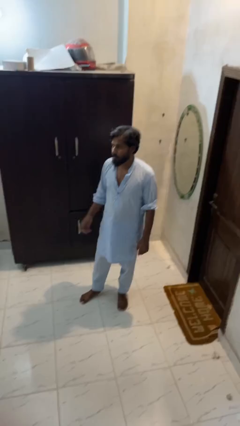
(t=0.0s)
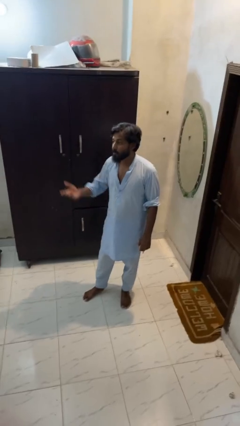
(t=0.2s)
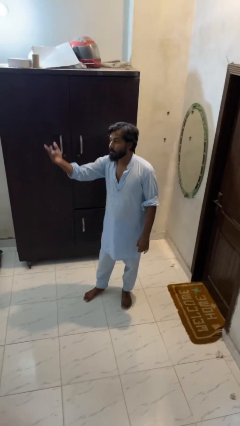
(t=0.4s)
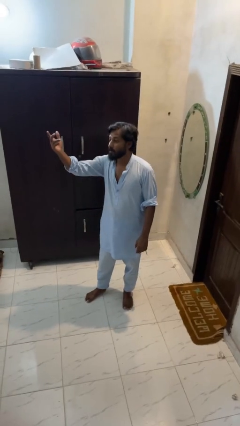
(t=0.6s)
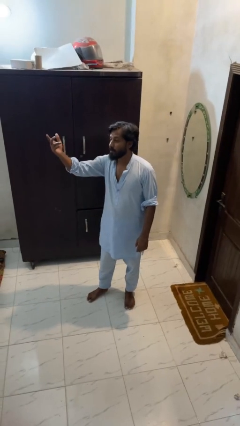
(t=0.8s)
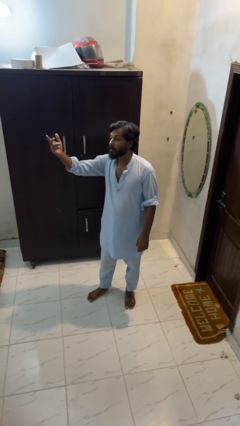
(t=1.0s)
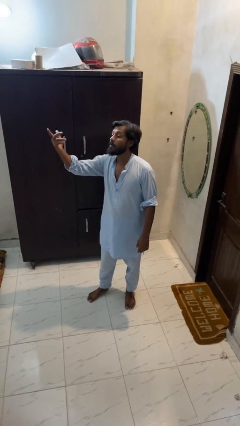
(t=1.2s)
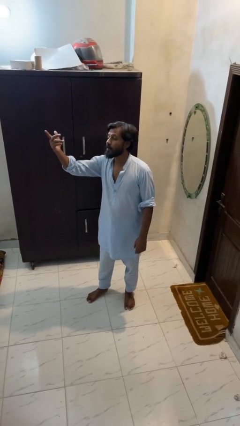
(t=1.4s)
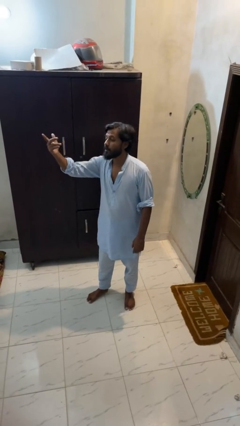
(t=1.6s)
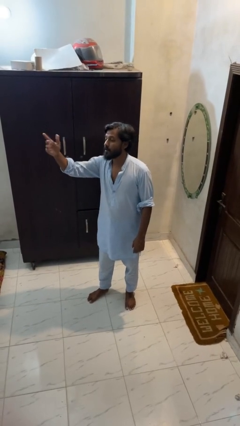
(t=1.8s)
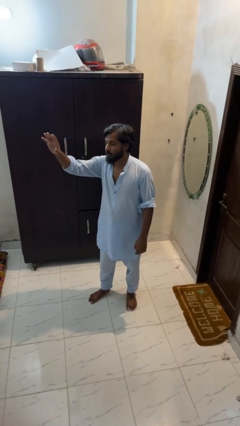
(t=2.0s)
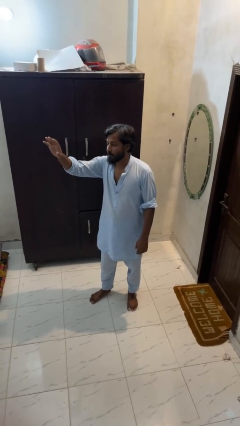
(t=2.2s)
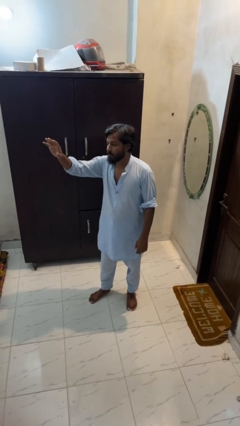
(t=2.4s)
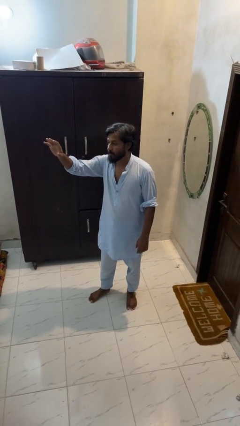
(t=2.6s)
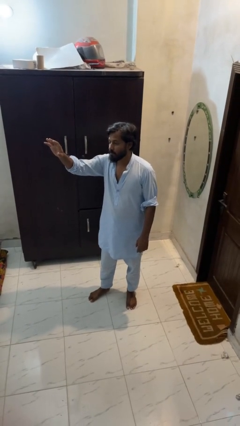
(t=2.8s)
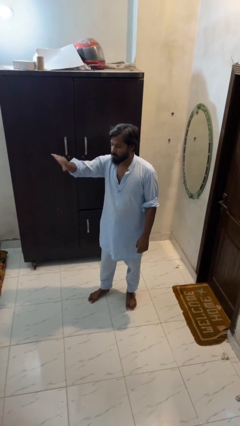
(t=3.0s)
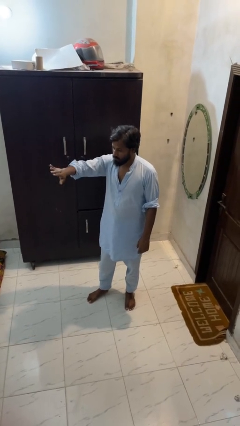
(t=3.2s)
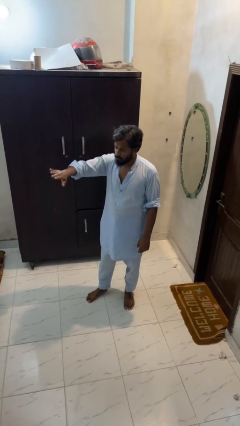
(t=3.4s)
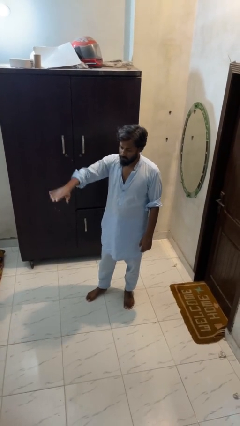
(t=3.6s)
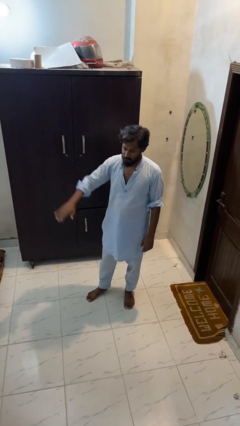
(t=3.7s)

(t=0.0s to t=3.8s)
person gestures raise hand

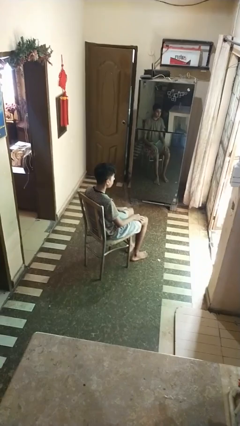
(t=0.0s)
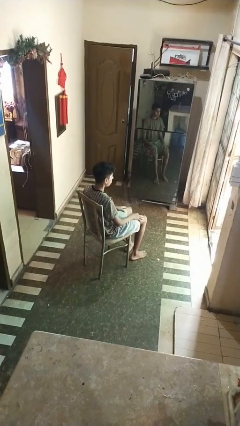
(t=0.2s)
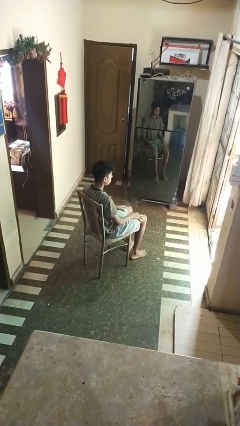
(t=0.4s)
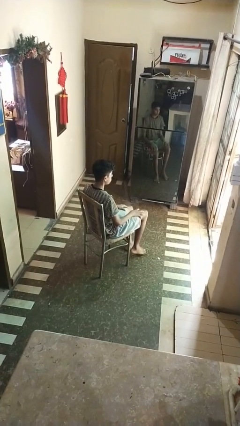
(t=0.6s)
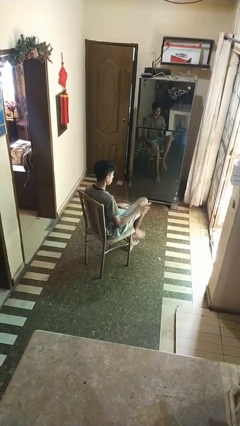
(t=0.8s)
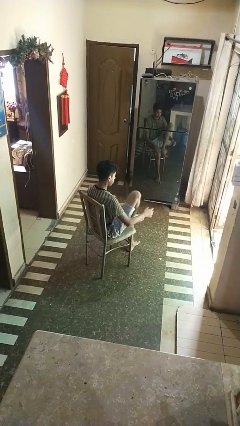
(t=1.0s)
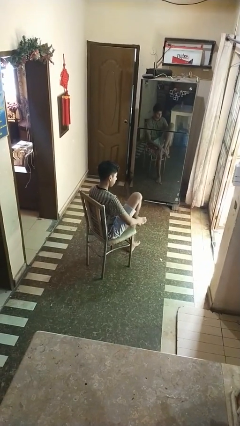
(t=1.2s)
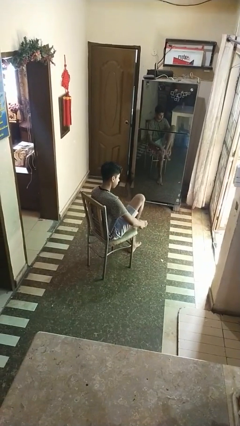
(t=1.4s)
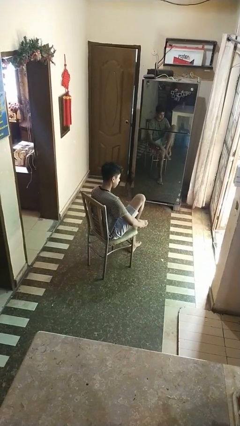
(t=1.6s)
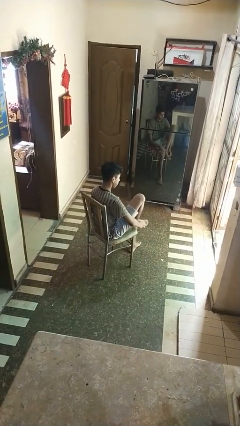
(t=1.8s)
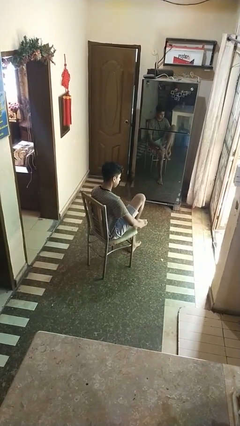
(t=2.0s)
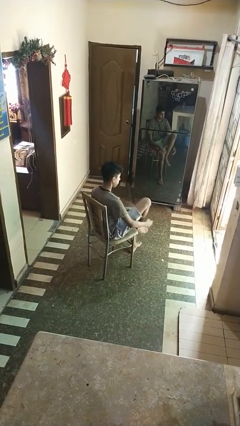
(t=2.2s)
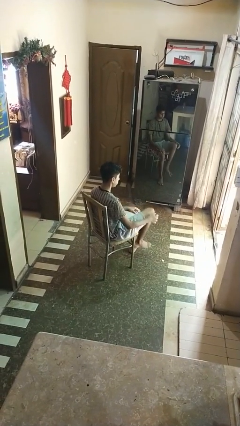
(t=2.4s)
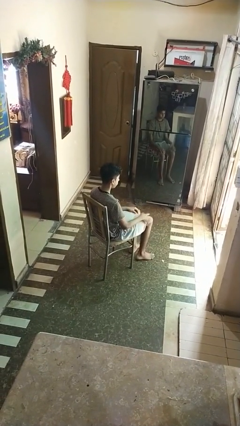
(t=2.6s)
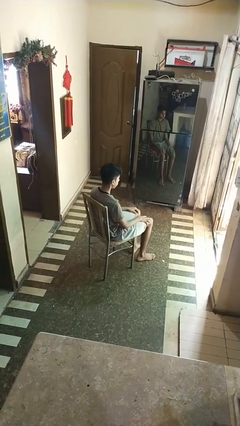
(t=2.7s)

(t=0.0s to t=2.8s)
person rubs foot

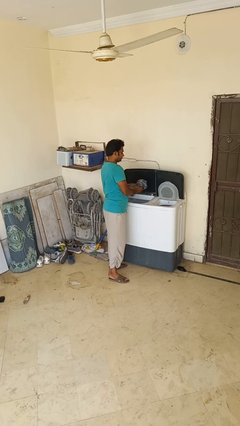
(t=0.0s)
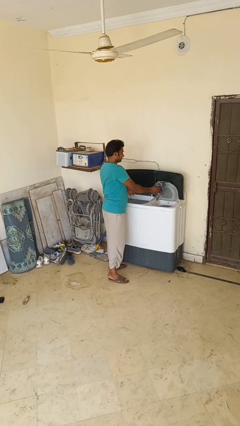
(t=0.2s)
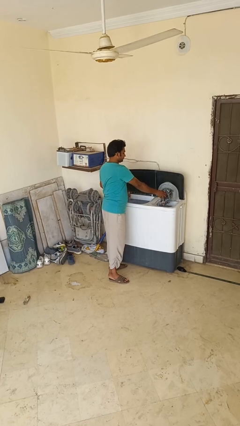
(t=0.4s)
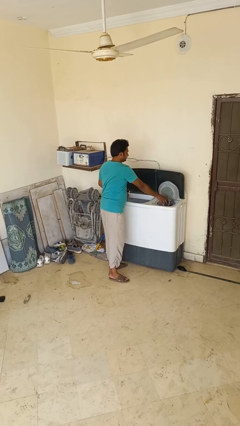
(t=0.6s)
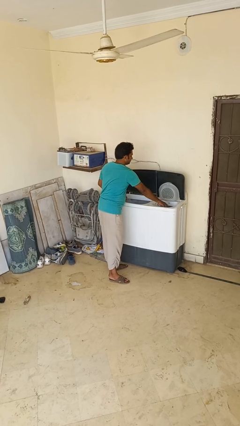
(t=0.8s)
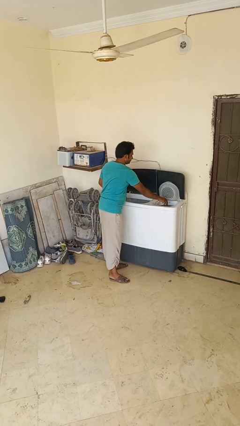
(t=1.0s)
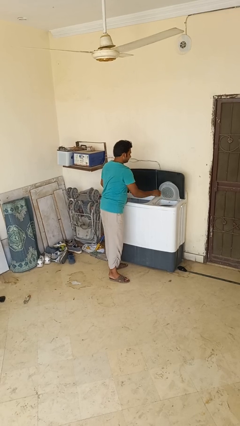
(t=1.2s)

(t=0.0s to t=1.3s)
person loads dryer

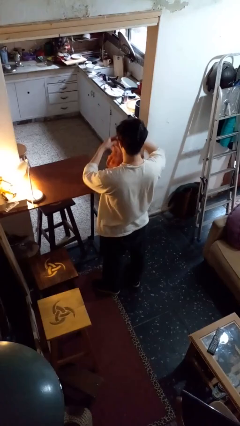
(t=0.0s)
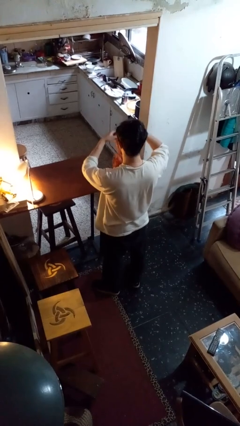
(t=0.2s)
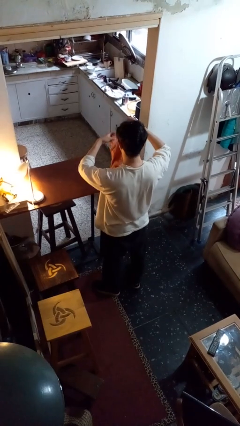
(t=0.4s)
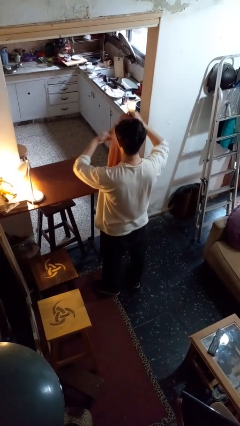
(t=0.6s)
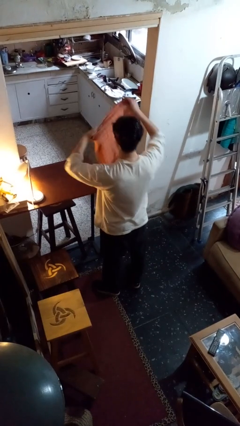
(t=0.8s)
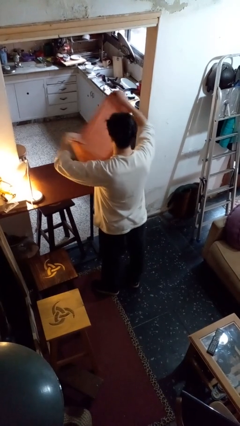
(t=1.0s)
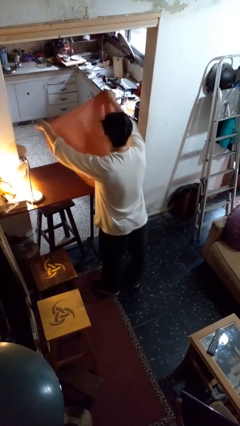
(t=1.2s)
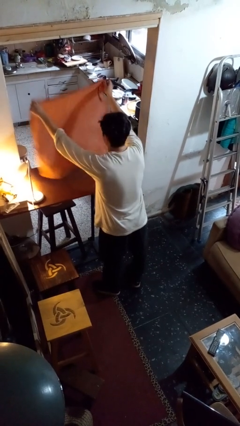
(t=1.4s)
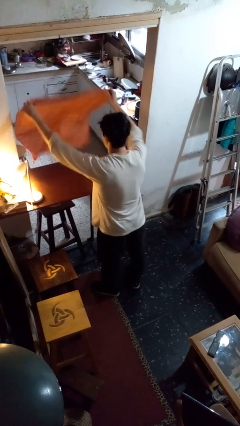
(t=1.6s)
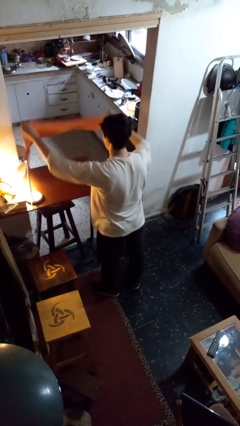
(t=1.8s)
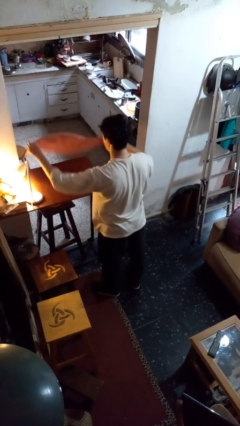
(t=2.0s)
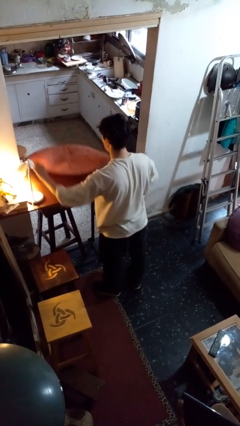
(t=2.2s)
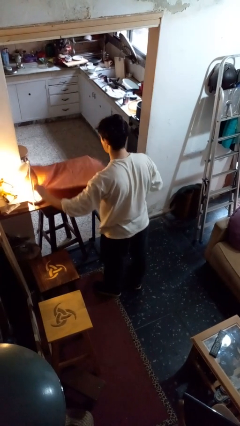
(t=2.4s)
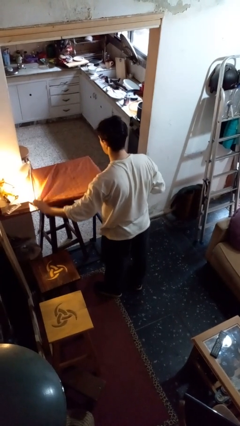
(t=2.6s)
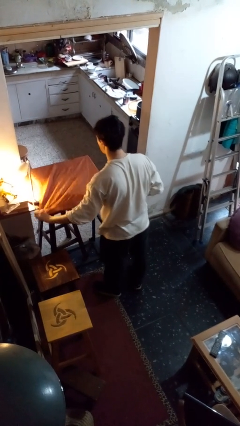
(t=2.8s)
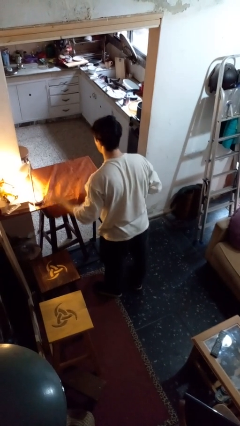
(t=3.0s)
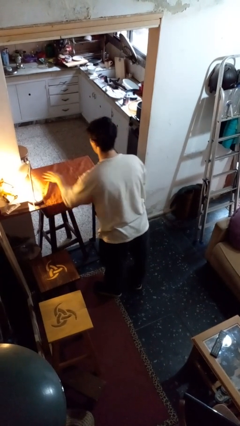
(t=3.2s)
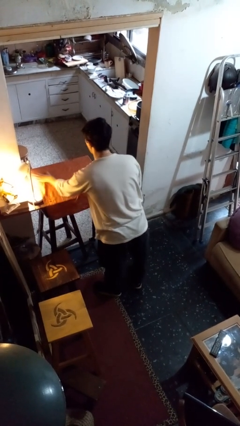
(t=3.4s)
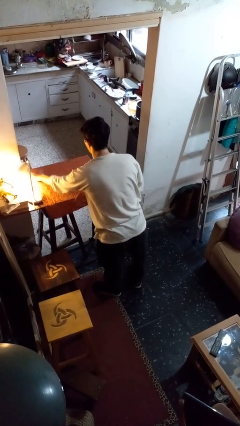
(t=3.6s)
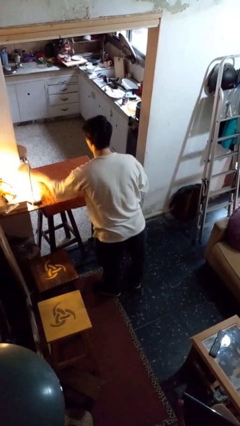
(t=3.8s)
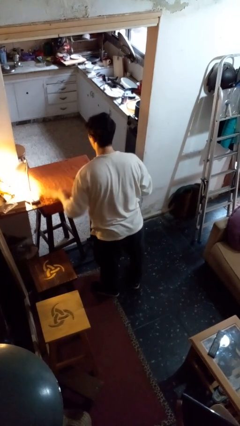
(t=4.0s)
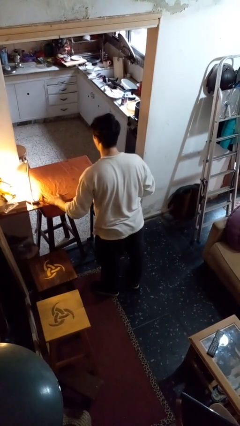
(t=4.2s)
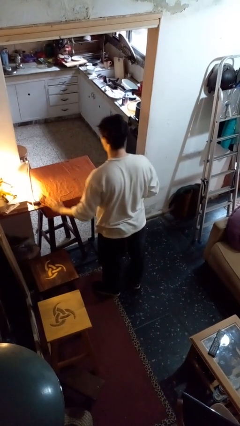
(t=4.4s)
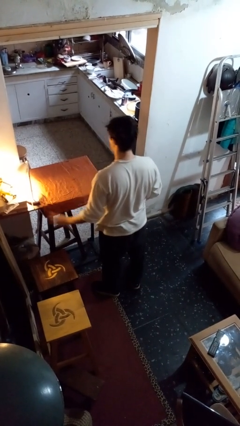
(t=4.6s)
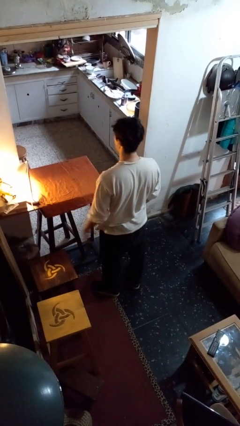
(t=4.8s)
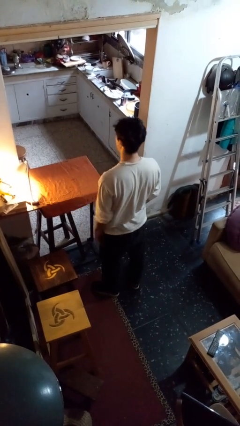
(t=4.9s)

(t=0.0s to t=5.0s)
person spreads tablecloth

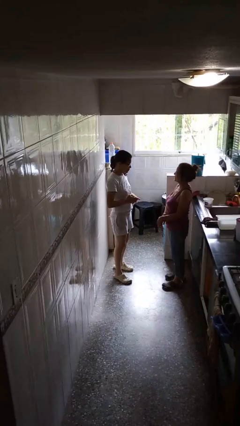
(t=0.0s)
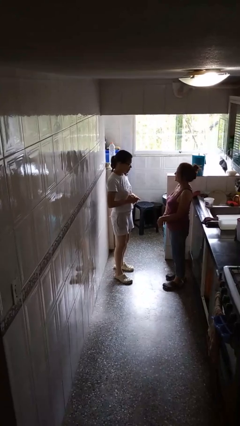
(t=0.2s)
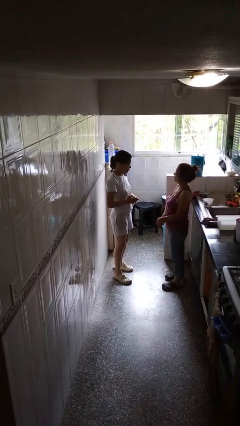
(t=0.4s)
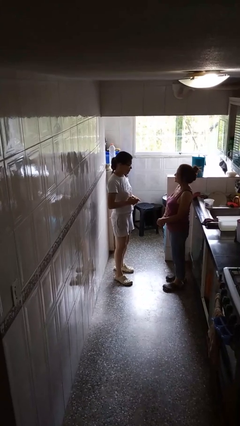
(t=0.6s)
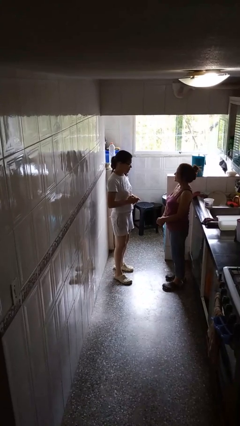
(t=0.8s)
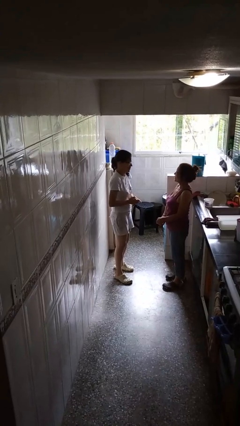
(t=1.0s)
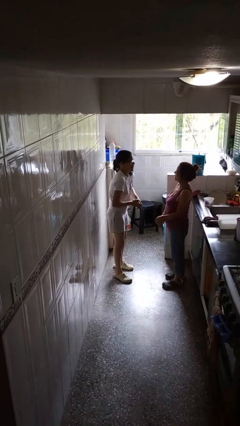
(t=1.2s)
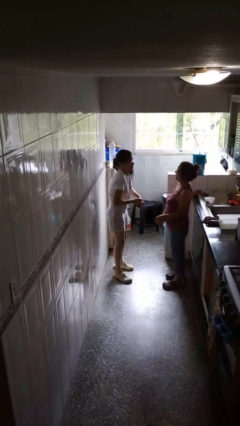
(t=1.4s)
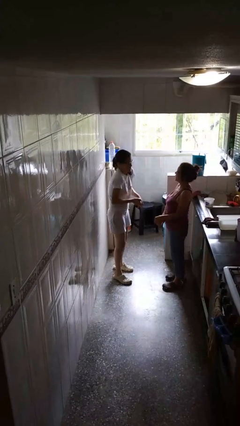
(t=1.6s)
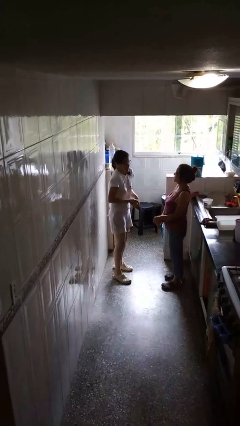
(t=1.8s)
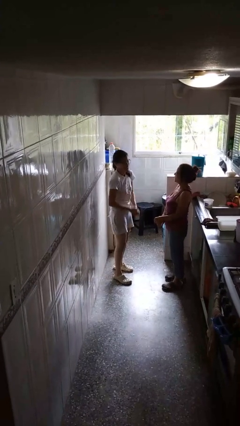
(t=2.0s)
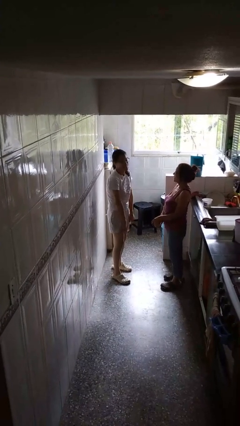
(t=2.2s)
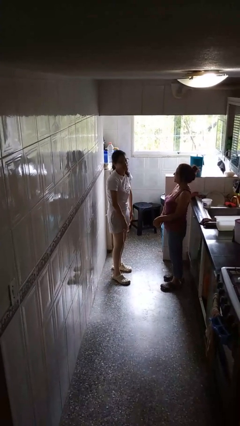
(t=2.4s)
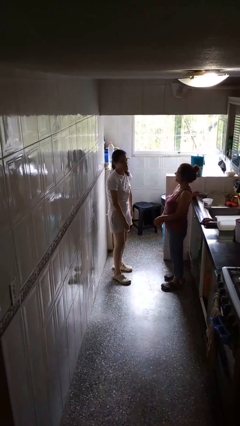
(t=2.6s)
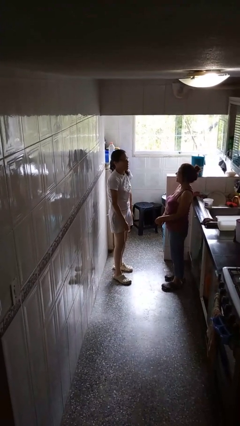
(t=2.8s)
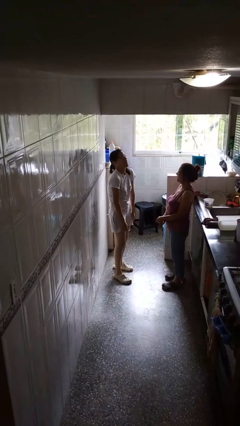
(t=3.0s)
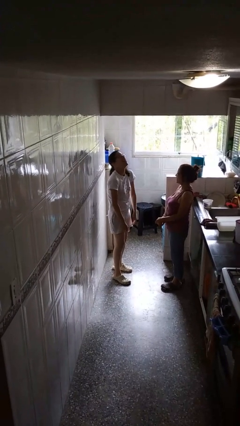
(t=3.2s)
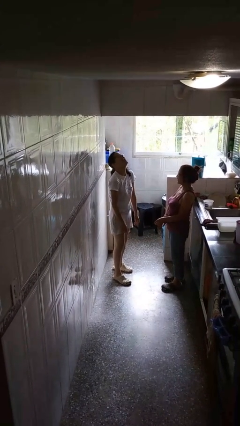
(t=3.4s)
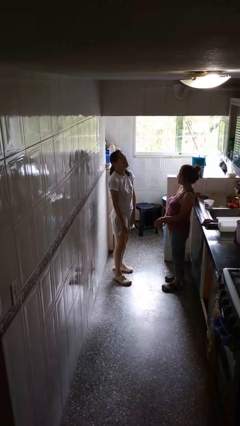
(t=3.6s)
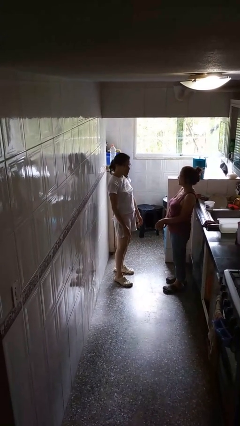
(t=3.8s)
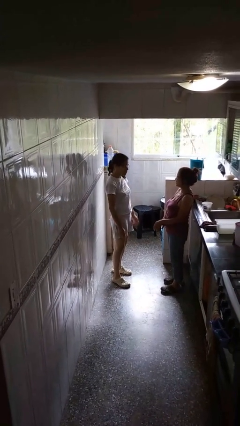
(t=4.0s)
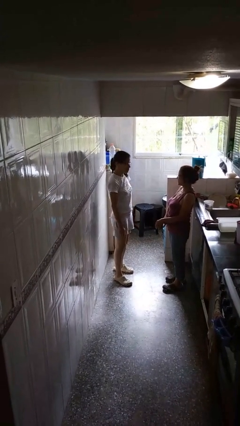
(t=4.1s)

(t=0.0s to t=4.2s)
person laughs with person

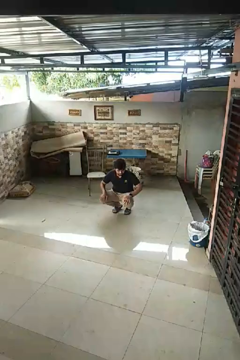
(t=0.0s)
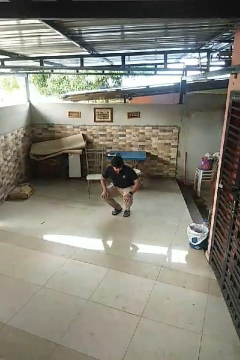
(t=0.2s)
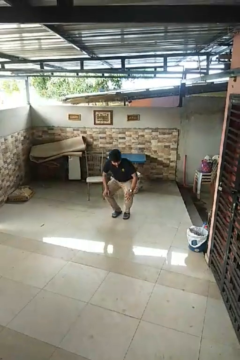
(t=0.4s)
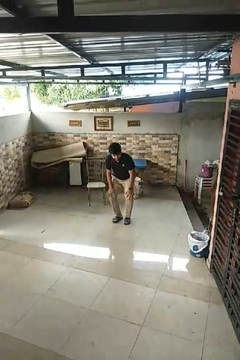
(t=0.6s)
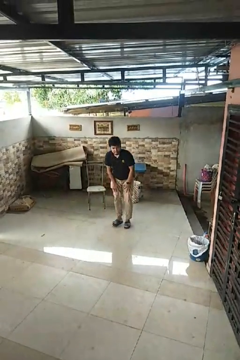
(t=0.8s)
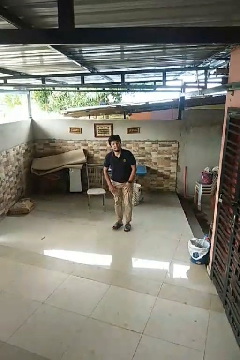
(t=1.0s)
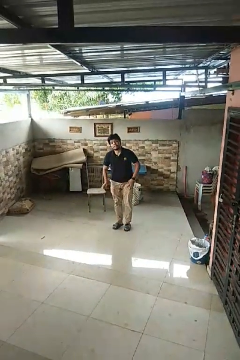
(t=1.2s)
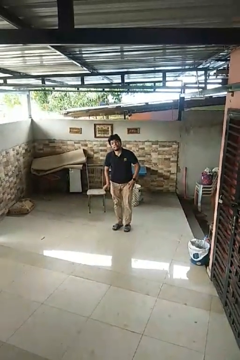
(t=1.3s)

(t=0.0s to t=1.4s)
person stands up
